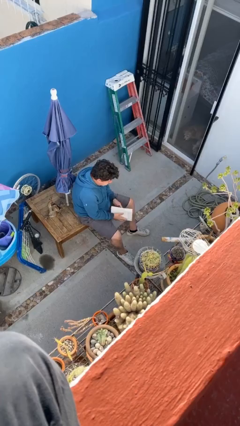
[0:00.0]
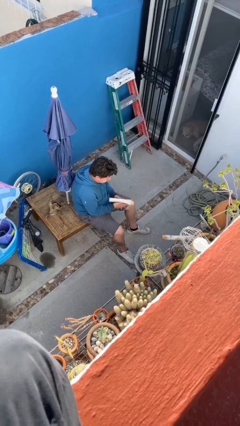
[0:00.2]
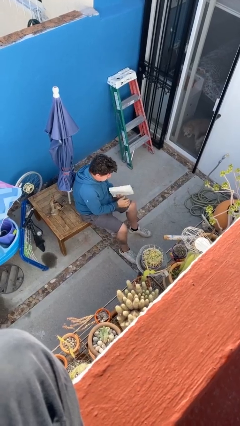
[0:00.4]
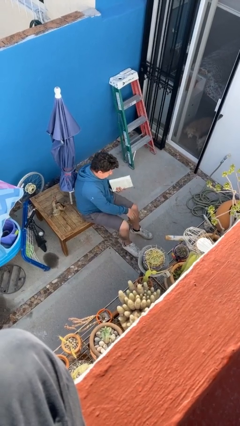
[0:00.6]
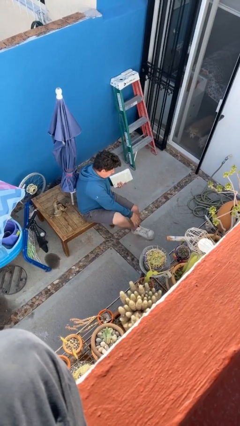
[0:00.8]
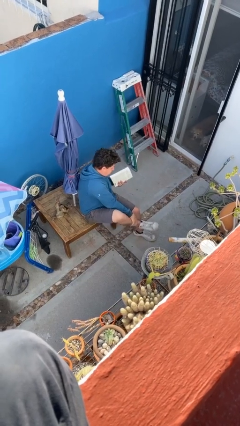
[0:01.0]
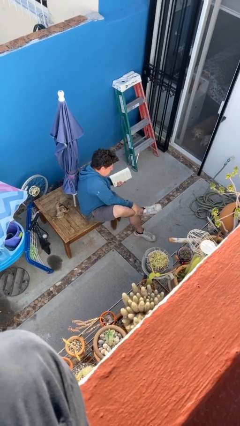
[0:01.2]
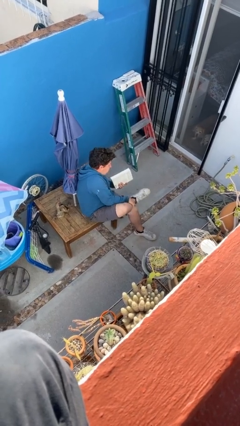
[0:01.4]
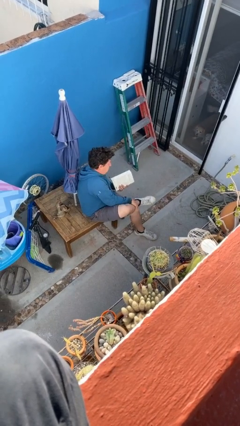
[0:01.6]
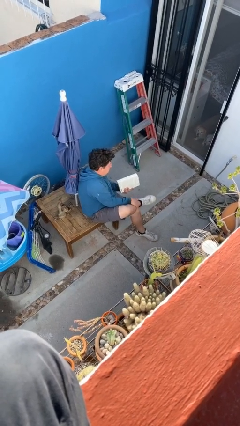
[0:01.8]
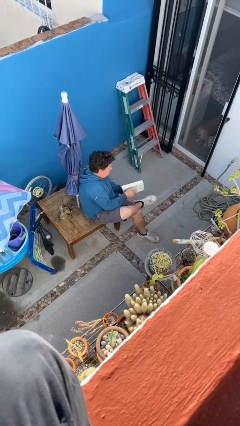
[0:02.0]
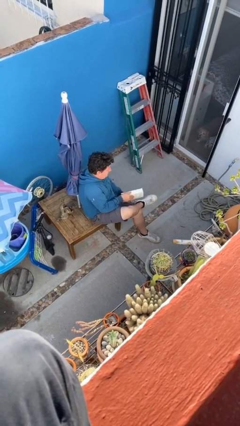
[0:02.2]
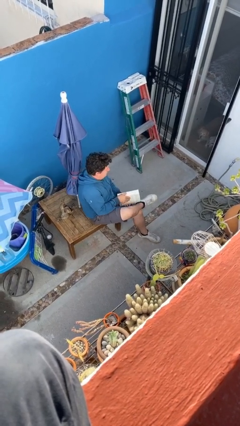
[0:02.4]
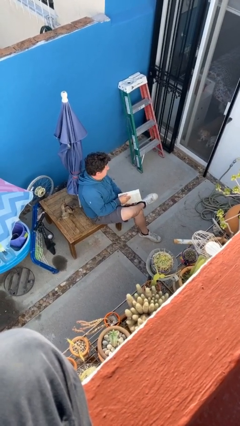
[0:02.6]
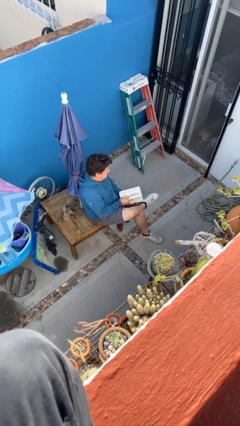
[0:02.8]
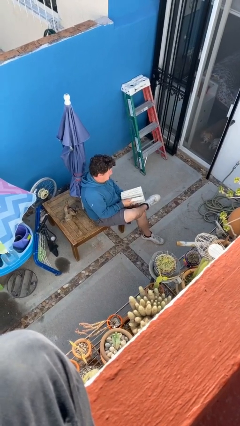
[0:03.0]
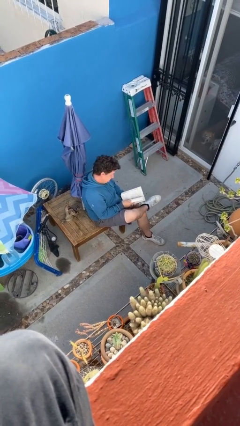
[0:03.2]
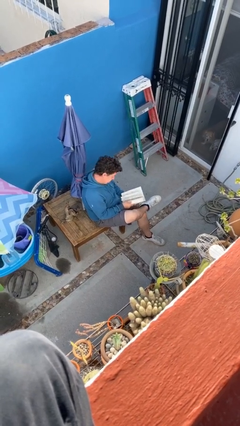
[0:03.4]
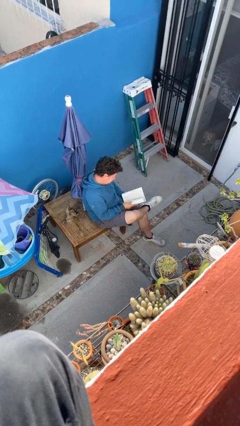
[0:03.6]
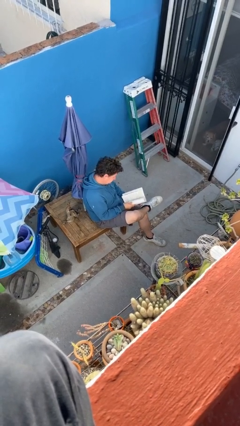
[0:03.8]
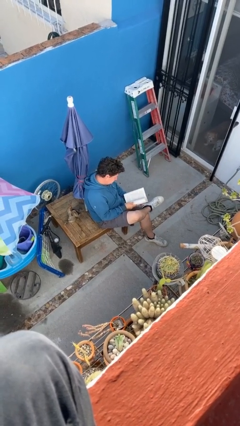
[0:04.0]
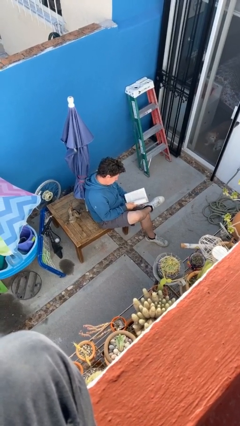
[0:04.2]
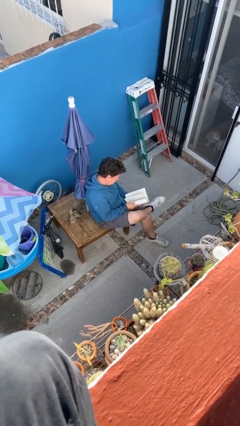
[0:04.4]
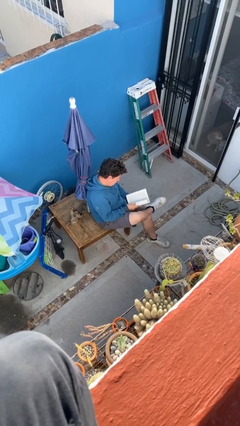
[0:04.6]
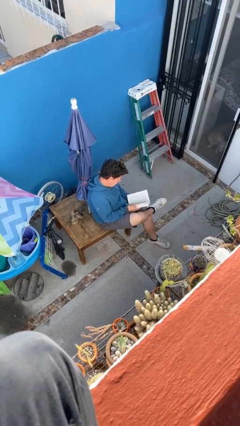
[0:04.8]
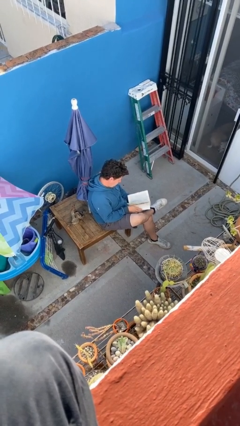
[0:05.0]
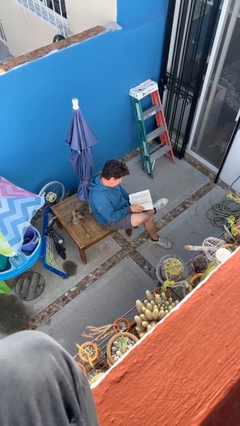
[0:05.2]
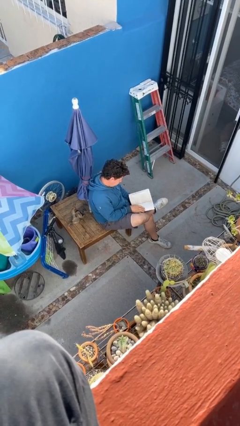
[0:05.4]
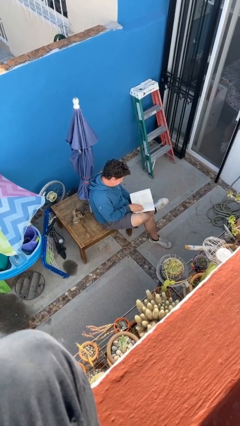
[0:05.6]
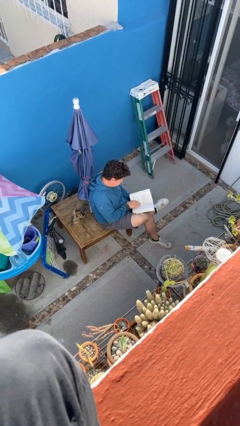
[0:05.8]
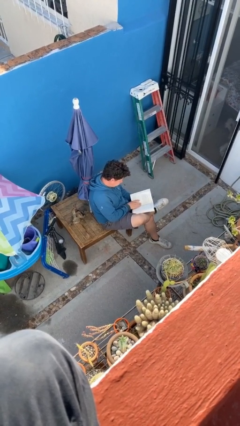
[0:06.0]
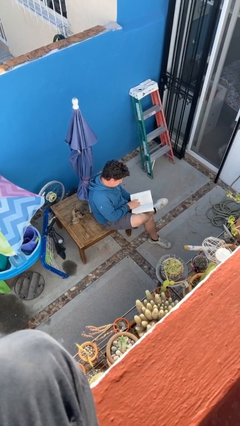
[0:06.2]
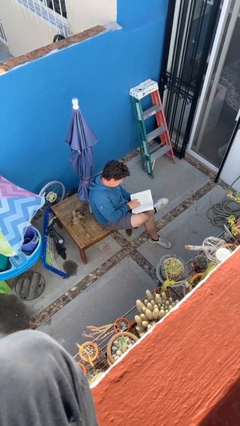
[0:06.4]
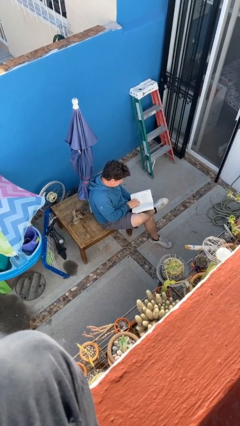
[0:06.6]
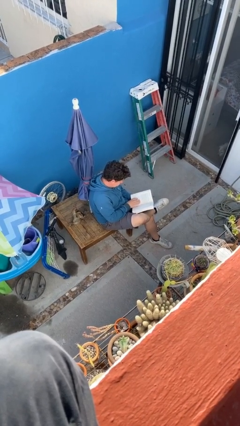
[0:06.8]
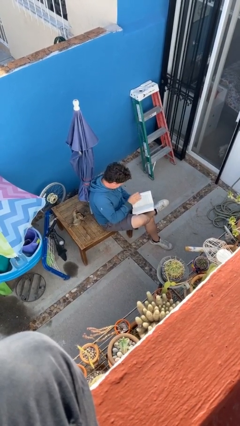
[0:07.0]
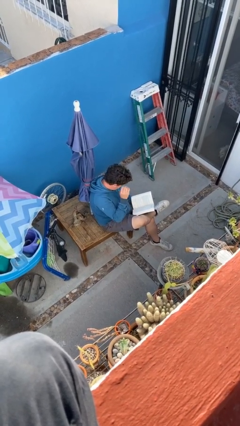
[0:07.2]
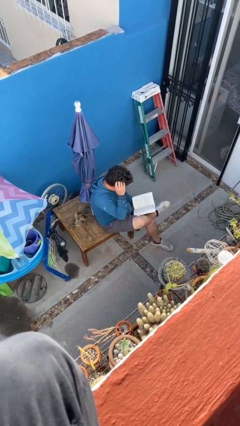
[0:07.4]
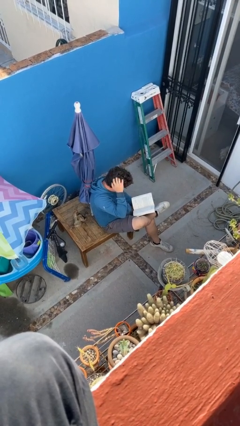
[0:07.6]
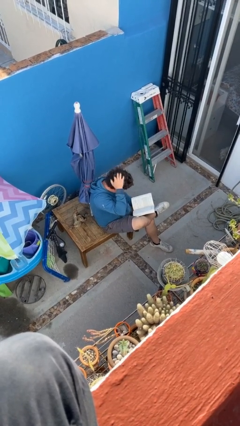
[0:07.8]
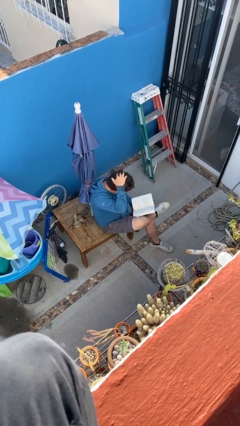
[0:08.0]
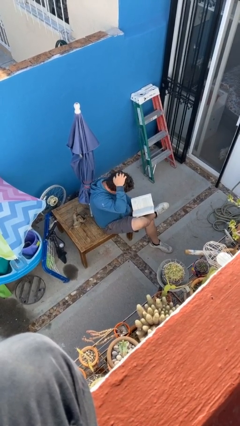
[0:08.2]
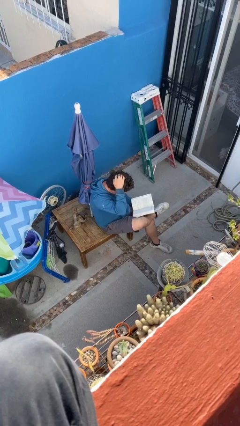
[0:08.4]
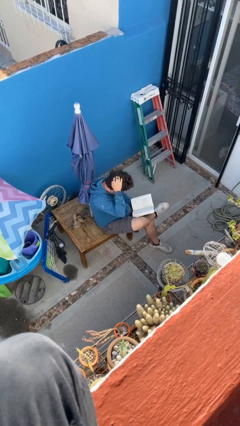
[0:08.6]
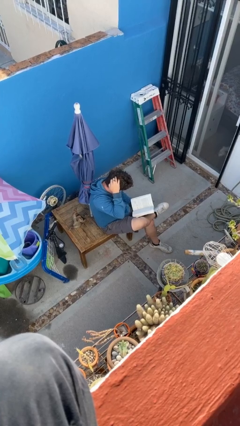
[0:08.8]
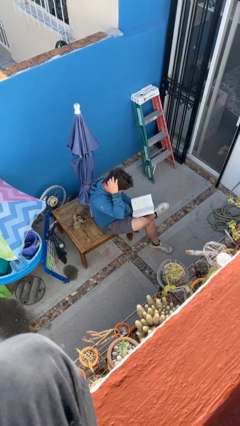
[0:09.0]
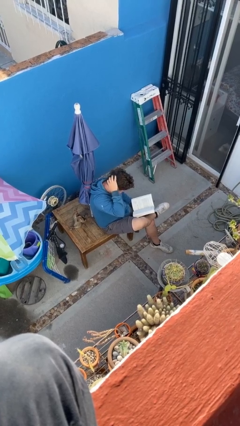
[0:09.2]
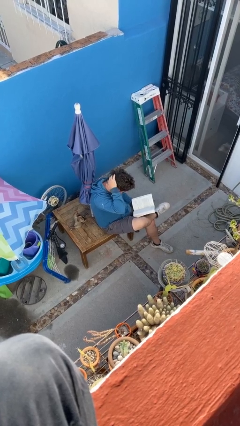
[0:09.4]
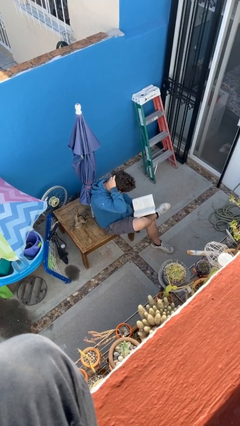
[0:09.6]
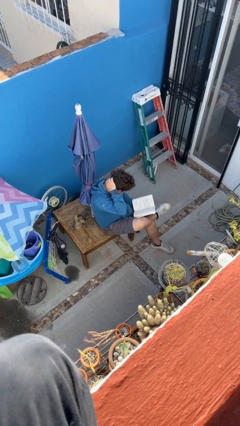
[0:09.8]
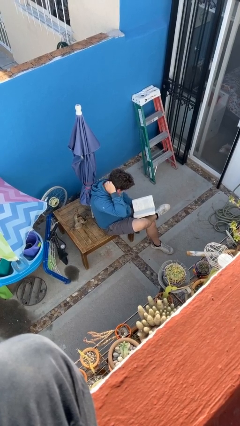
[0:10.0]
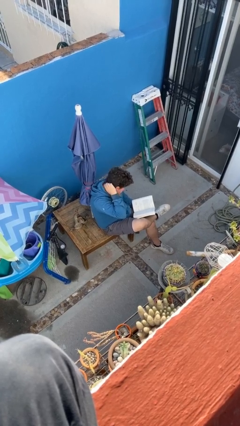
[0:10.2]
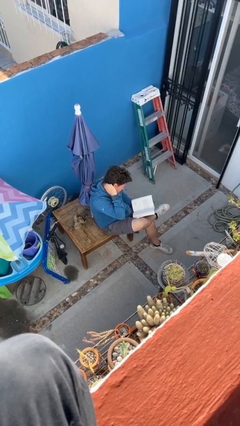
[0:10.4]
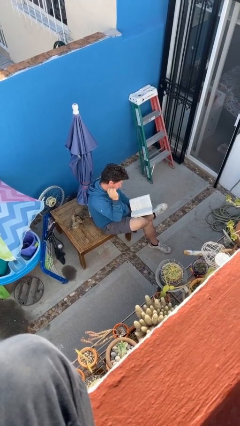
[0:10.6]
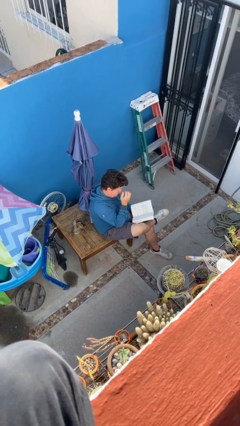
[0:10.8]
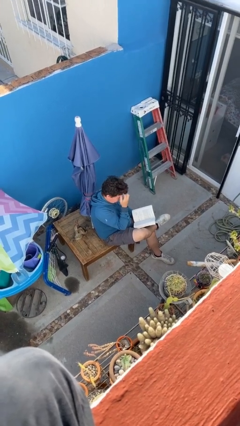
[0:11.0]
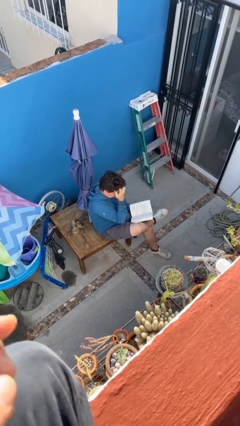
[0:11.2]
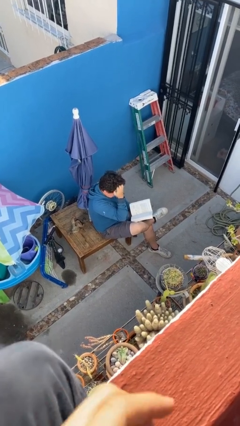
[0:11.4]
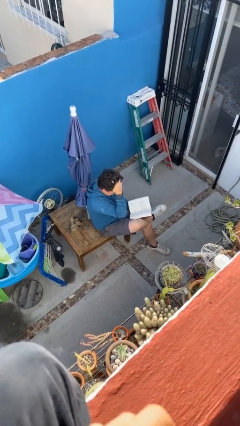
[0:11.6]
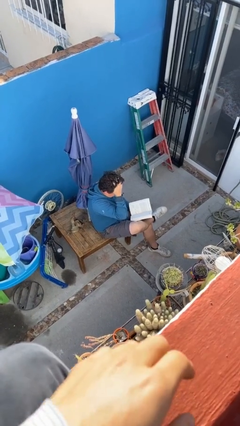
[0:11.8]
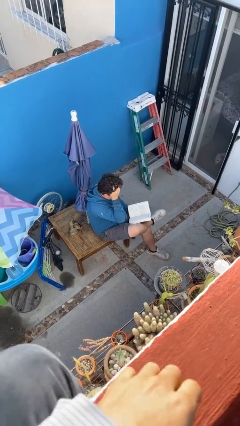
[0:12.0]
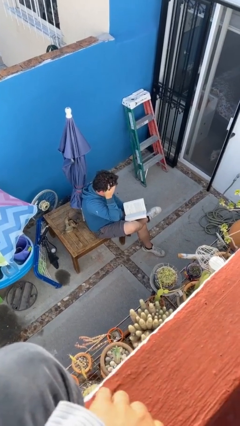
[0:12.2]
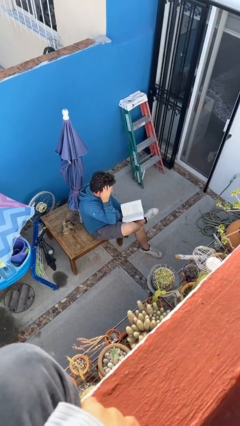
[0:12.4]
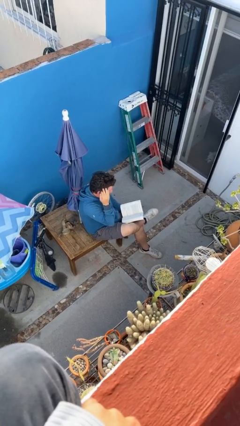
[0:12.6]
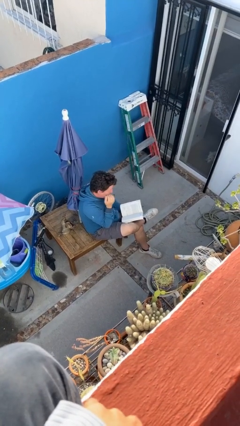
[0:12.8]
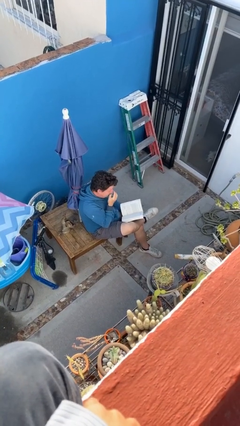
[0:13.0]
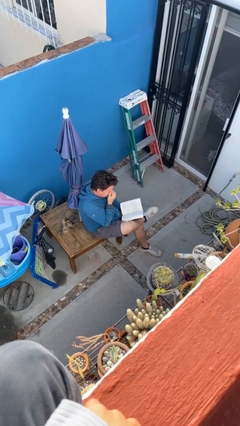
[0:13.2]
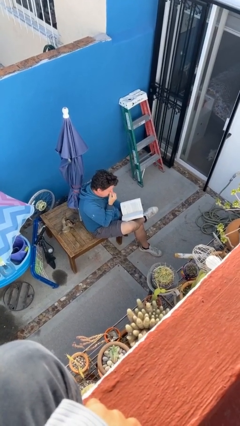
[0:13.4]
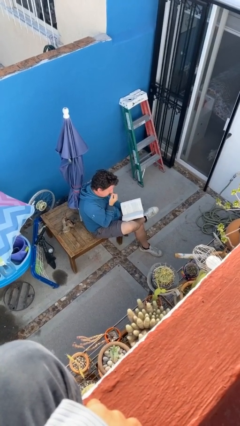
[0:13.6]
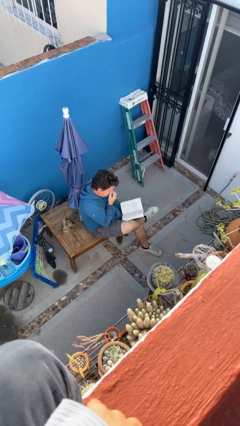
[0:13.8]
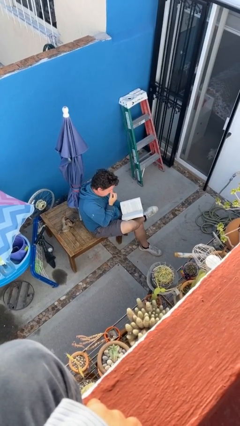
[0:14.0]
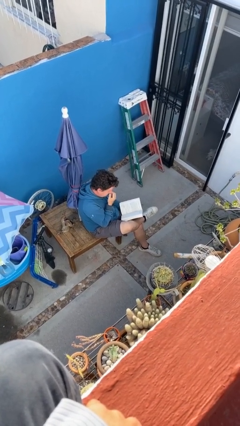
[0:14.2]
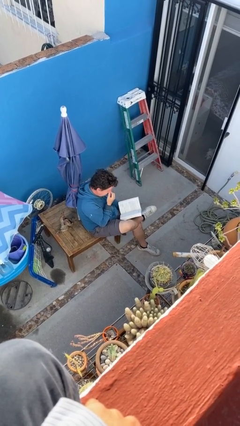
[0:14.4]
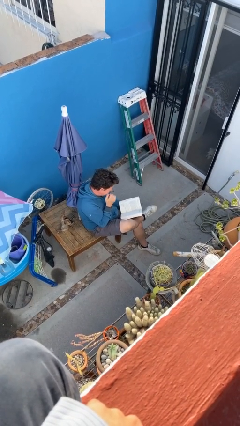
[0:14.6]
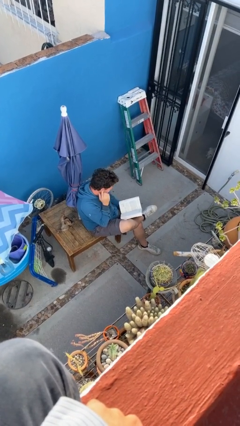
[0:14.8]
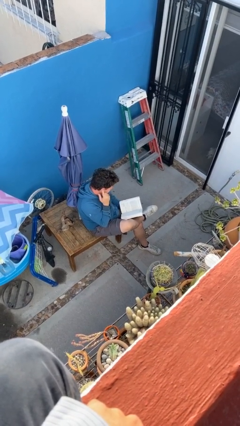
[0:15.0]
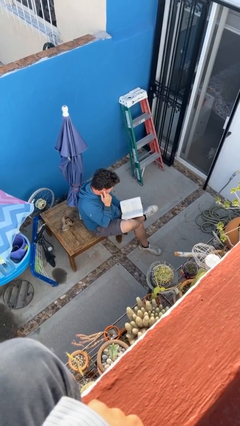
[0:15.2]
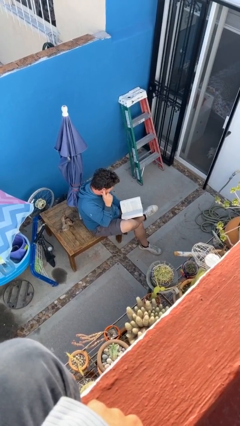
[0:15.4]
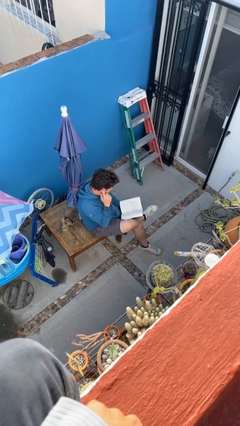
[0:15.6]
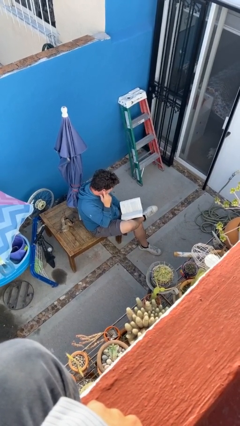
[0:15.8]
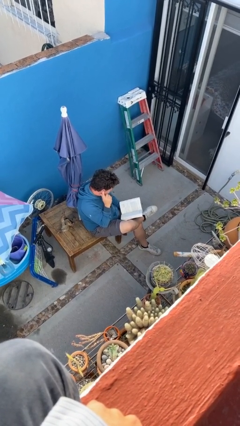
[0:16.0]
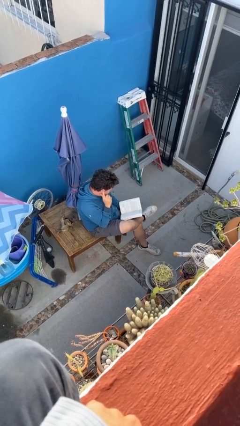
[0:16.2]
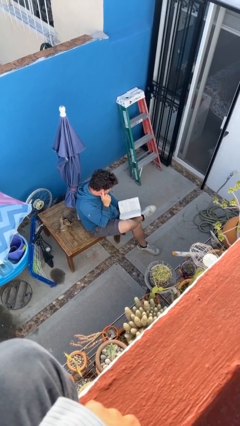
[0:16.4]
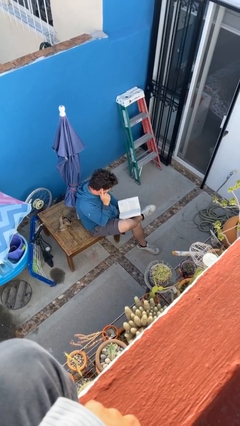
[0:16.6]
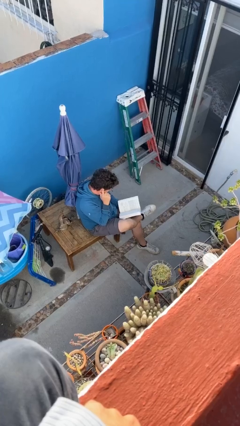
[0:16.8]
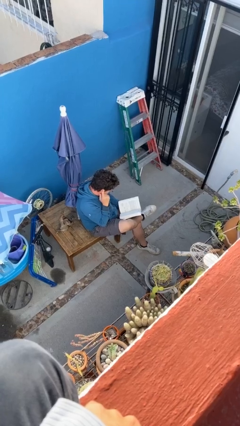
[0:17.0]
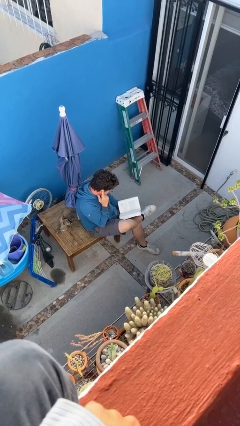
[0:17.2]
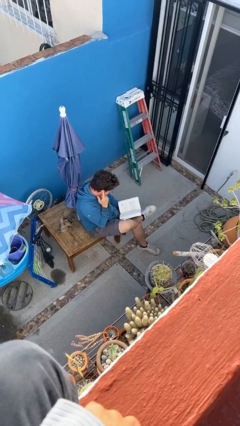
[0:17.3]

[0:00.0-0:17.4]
person reads document

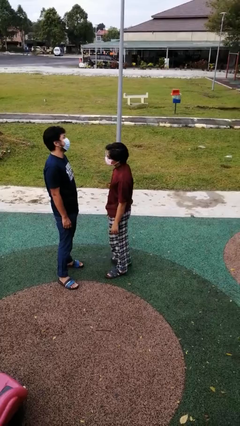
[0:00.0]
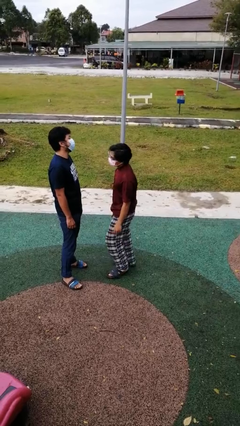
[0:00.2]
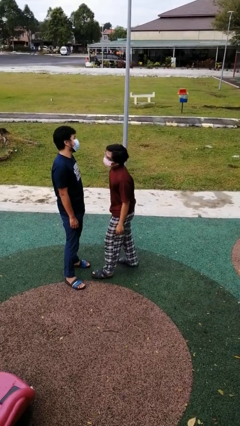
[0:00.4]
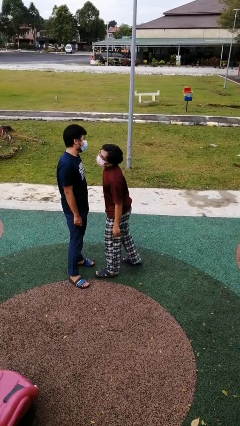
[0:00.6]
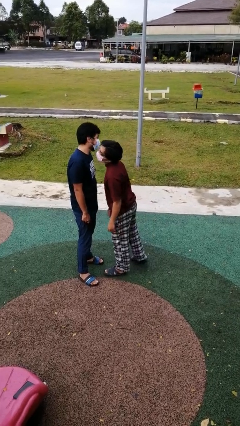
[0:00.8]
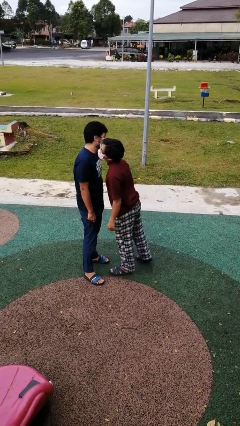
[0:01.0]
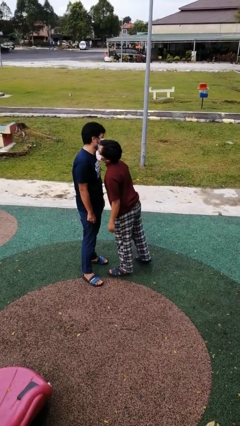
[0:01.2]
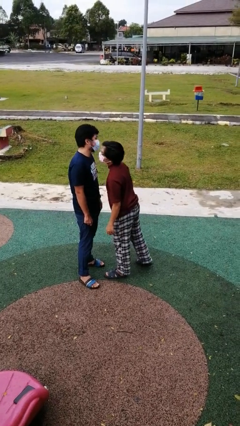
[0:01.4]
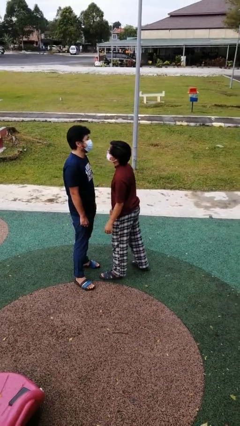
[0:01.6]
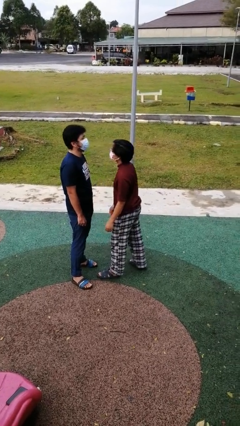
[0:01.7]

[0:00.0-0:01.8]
person kisses cheek of person
